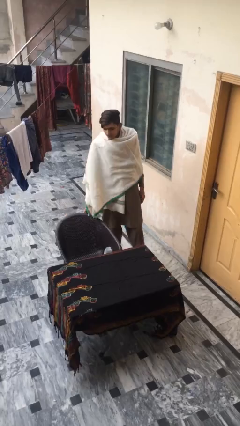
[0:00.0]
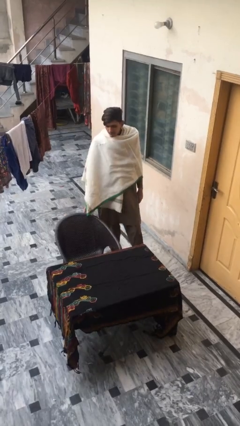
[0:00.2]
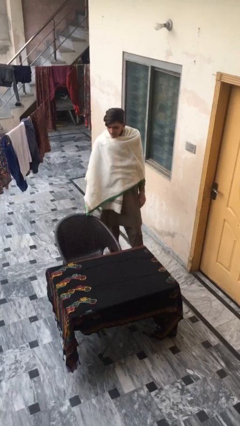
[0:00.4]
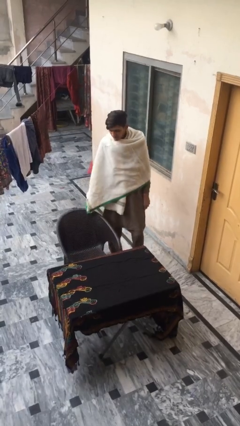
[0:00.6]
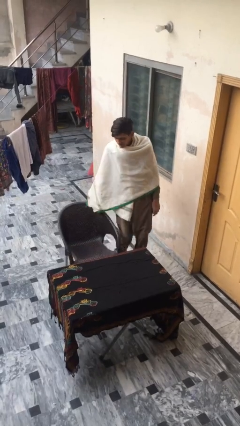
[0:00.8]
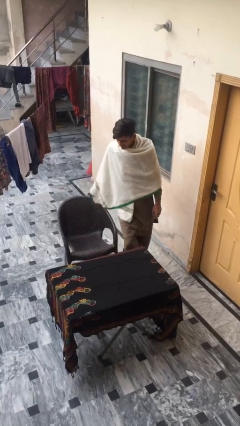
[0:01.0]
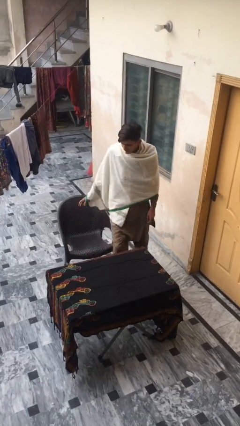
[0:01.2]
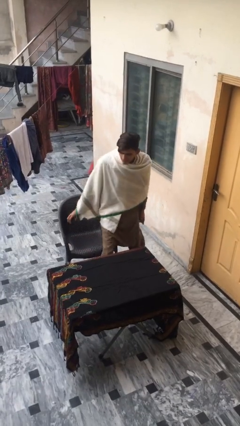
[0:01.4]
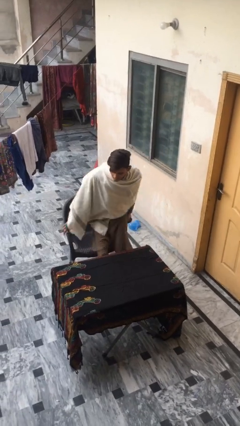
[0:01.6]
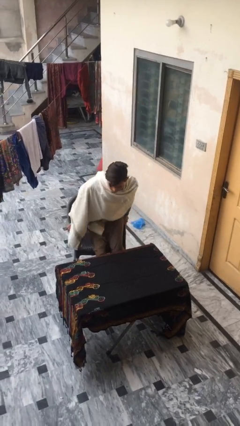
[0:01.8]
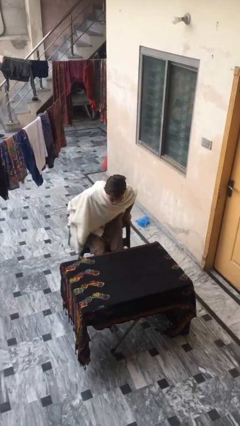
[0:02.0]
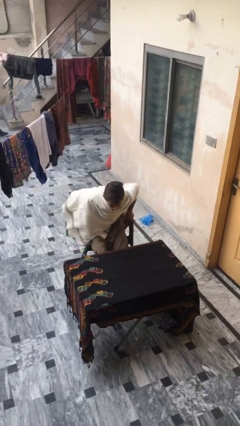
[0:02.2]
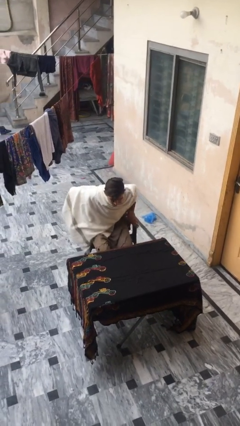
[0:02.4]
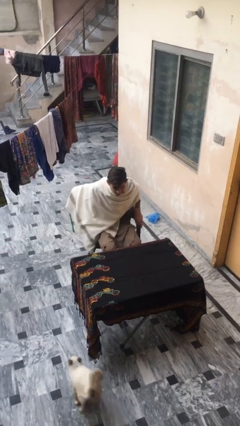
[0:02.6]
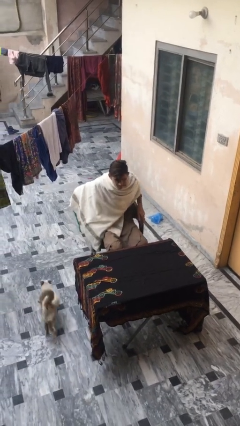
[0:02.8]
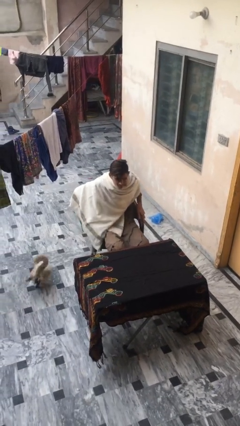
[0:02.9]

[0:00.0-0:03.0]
person sits down

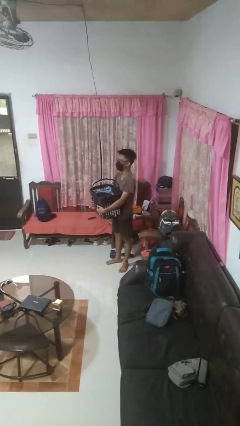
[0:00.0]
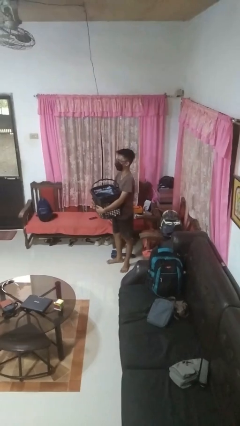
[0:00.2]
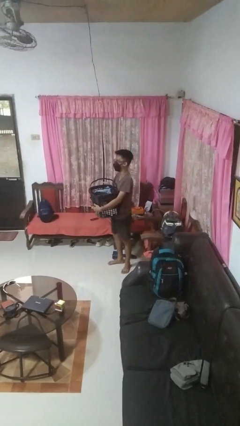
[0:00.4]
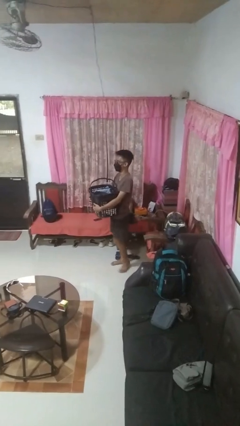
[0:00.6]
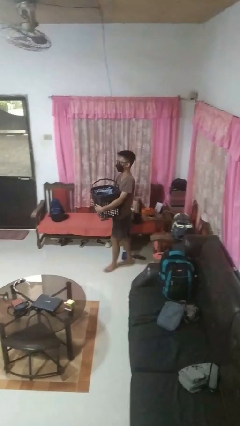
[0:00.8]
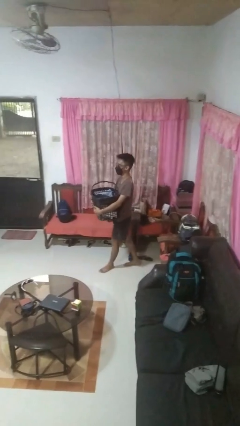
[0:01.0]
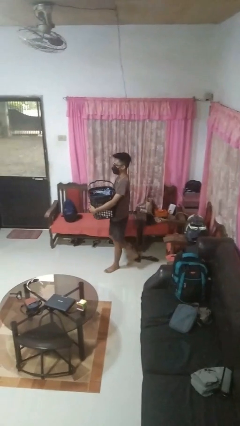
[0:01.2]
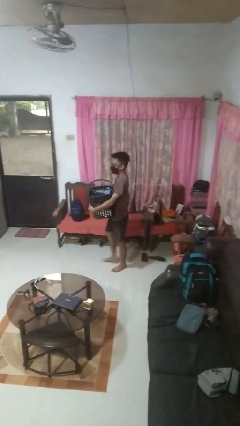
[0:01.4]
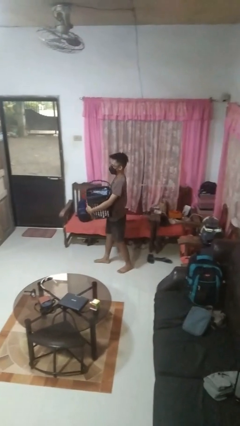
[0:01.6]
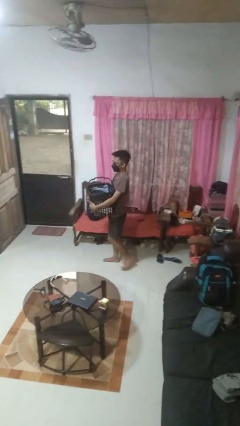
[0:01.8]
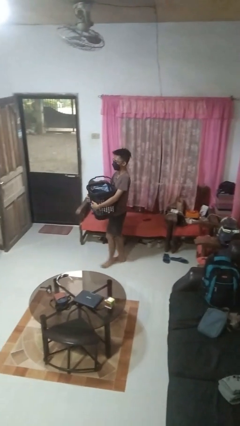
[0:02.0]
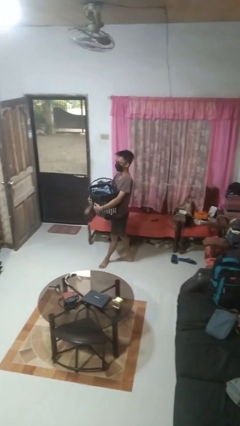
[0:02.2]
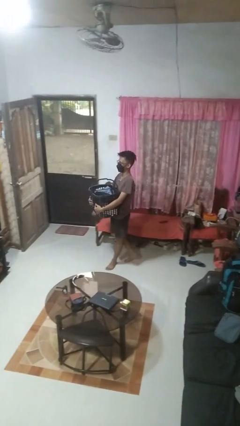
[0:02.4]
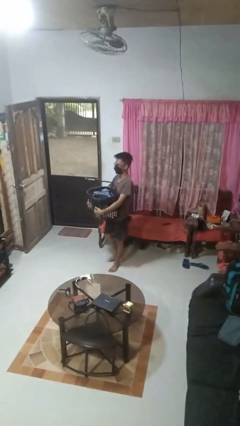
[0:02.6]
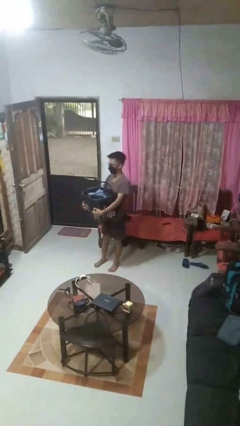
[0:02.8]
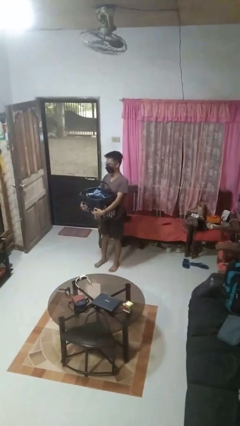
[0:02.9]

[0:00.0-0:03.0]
person carries laundry basket

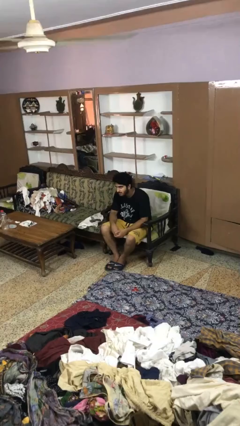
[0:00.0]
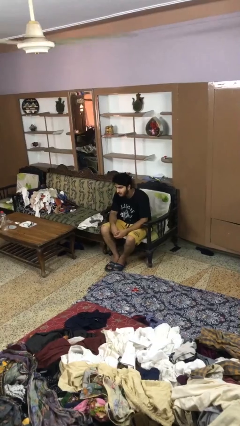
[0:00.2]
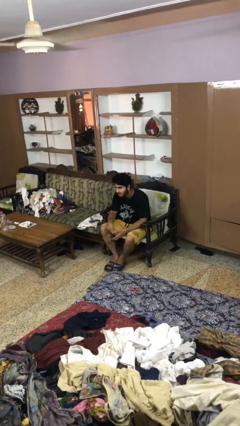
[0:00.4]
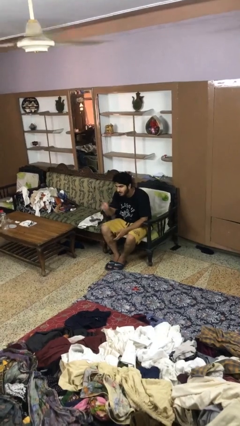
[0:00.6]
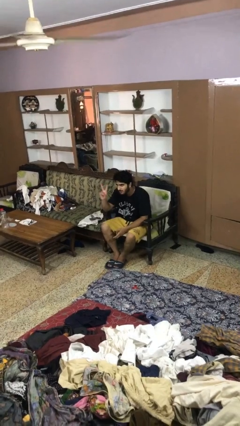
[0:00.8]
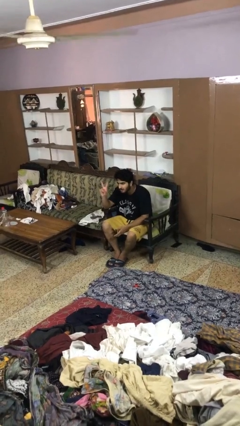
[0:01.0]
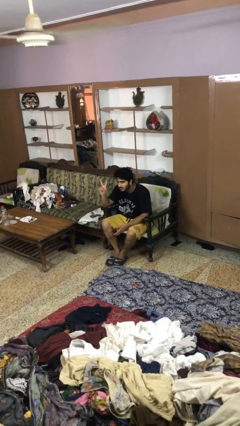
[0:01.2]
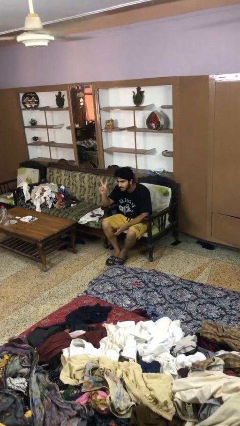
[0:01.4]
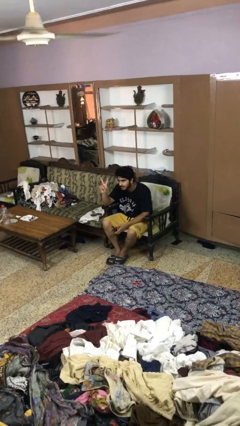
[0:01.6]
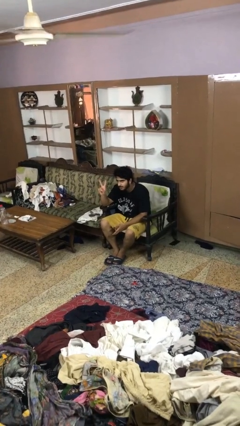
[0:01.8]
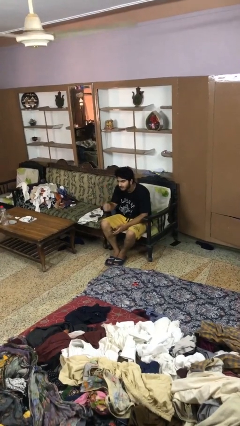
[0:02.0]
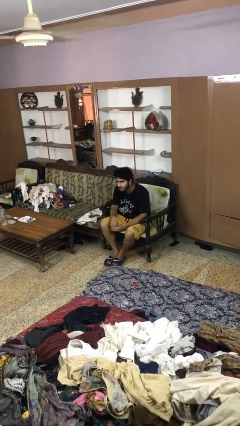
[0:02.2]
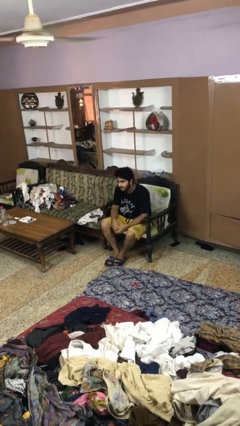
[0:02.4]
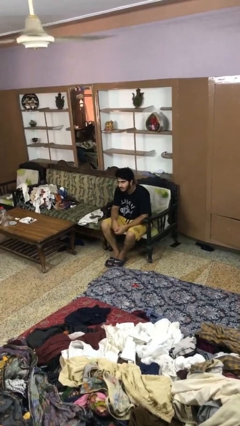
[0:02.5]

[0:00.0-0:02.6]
person gestures peace

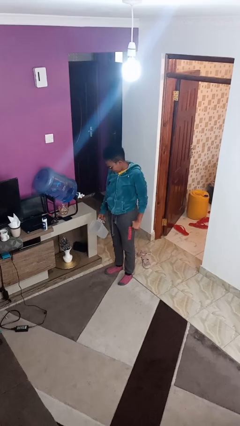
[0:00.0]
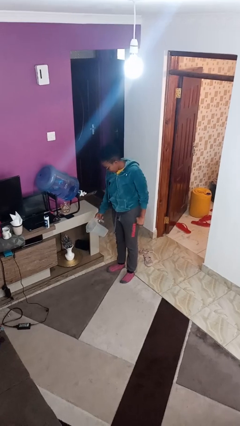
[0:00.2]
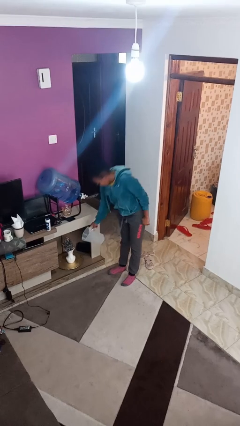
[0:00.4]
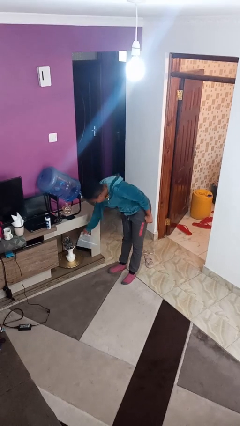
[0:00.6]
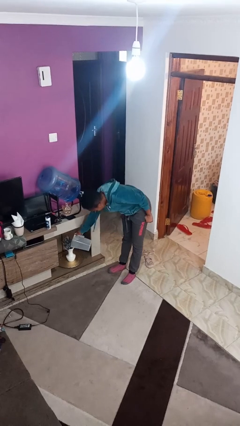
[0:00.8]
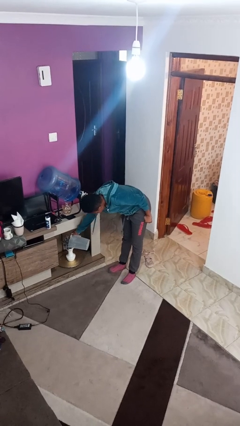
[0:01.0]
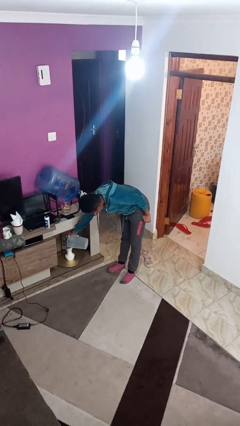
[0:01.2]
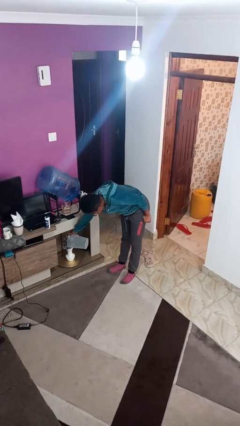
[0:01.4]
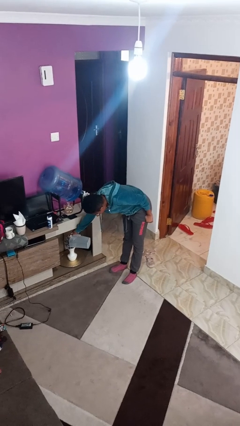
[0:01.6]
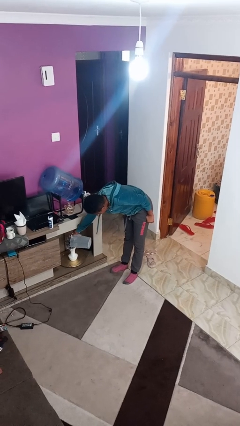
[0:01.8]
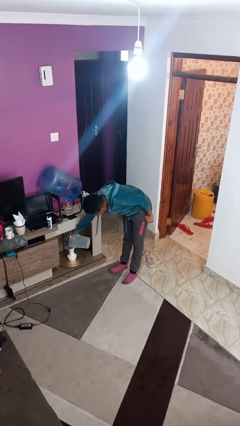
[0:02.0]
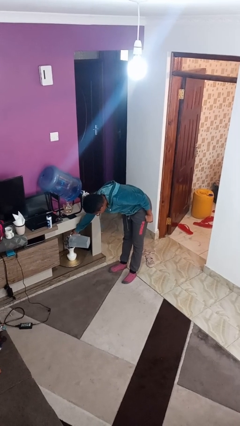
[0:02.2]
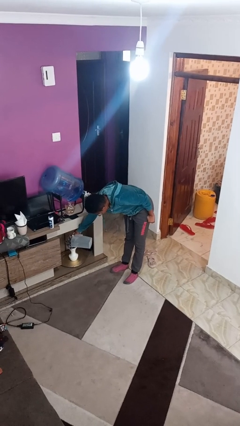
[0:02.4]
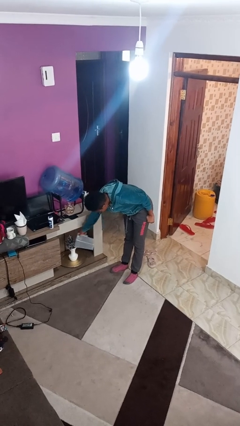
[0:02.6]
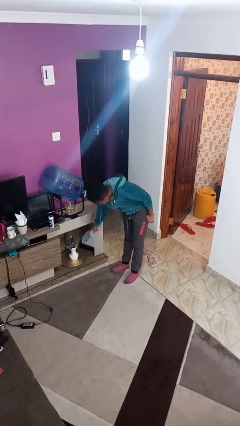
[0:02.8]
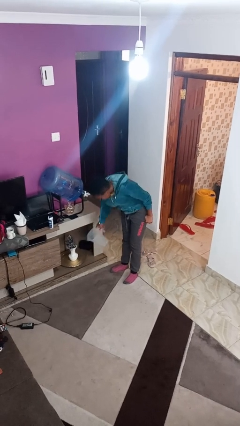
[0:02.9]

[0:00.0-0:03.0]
person waters houseplant

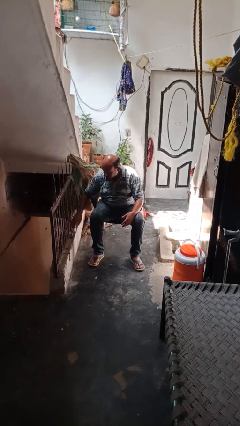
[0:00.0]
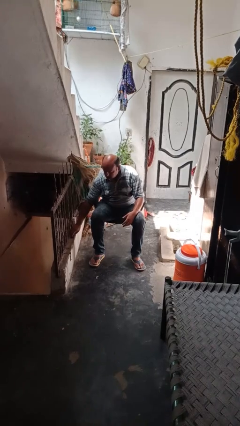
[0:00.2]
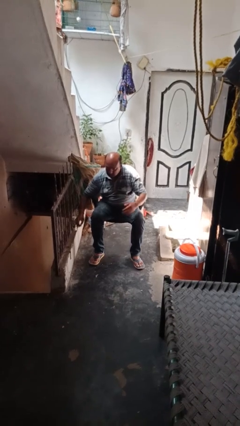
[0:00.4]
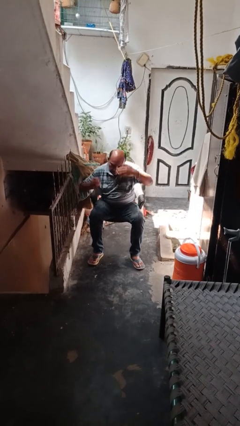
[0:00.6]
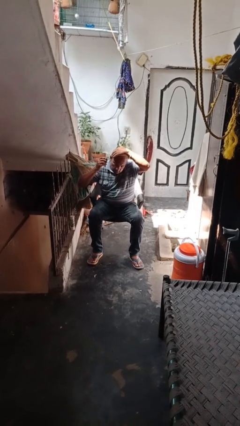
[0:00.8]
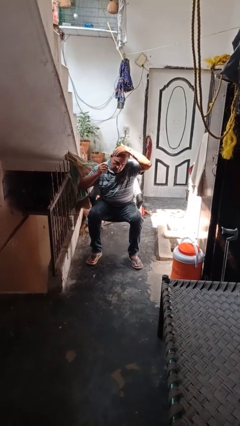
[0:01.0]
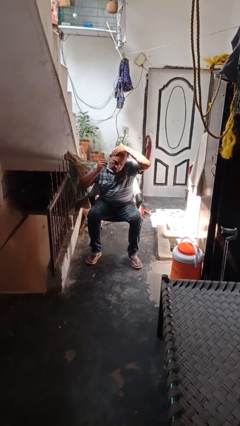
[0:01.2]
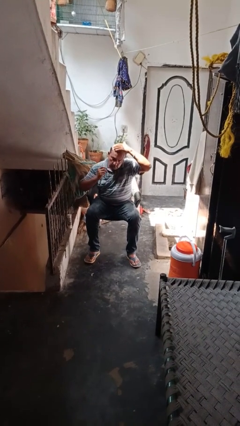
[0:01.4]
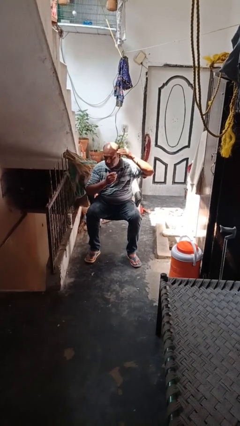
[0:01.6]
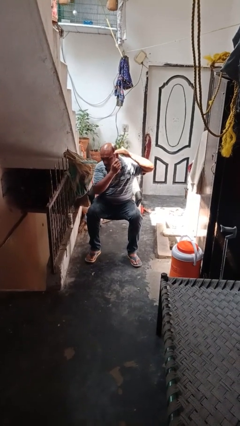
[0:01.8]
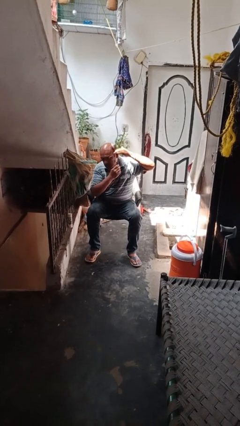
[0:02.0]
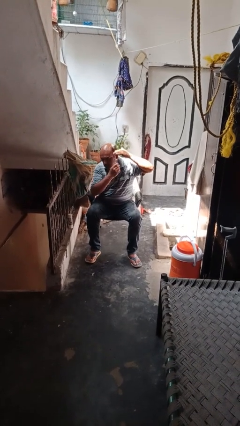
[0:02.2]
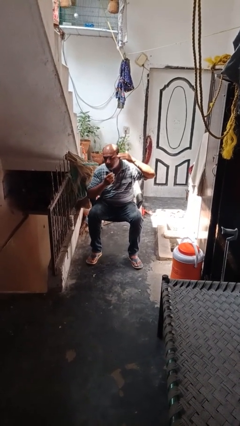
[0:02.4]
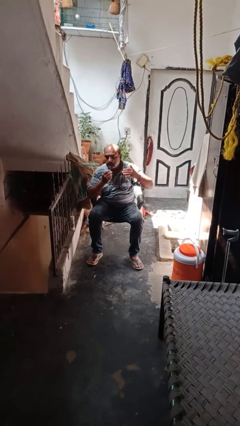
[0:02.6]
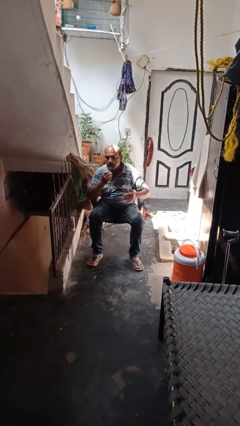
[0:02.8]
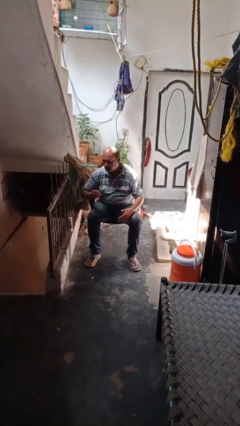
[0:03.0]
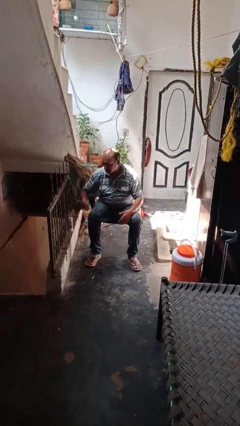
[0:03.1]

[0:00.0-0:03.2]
person shaves face

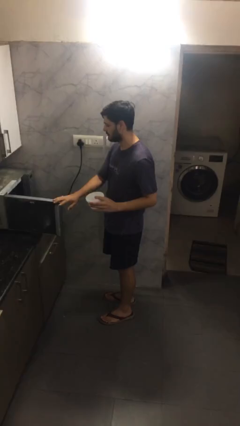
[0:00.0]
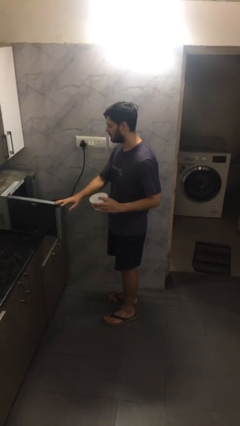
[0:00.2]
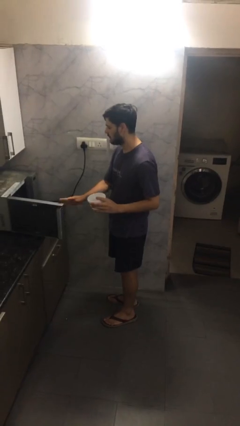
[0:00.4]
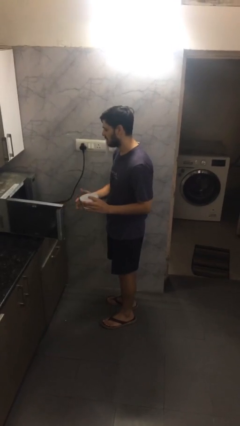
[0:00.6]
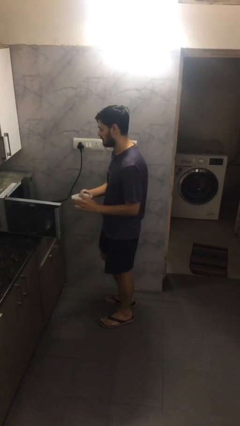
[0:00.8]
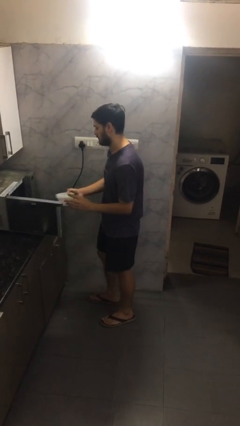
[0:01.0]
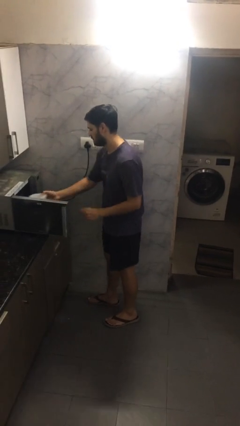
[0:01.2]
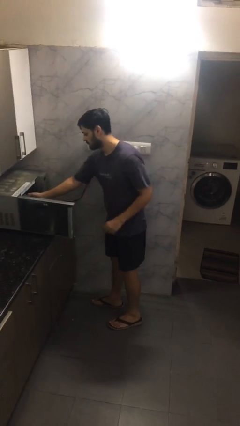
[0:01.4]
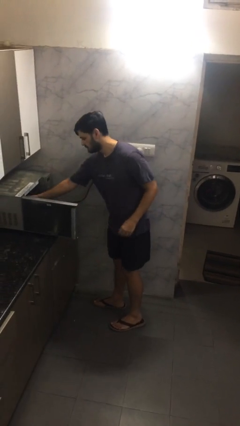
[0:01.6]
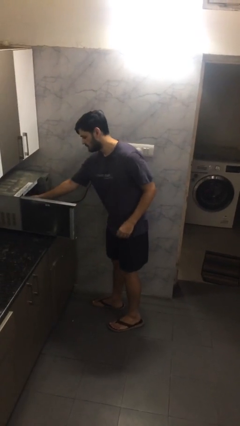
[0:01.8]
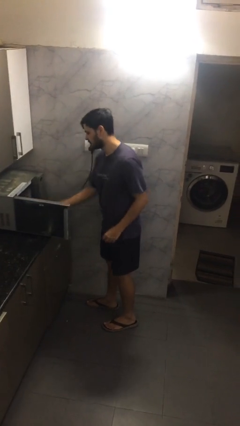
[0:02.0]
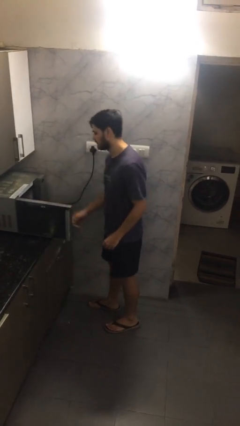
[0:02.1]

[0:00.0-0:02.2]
person puts object into microwave

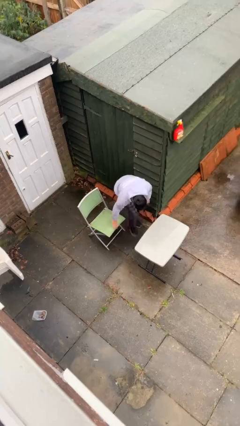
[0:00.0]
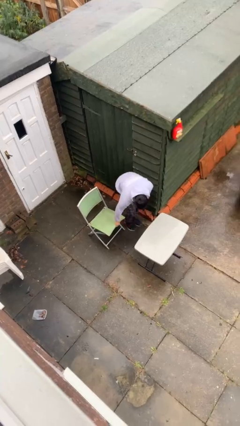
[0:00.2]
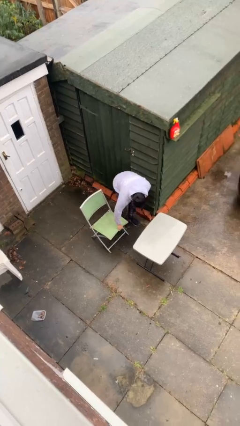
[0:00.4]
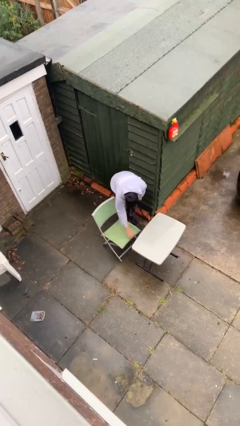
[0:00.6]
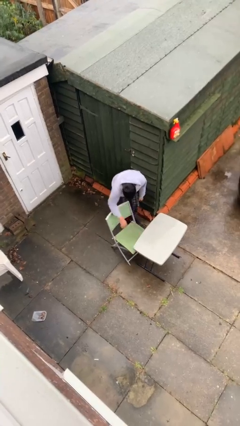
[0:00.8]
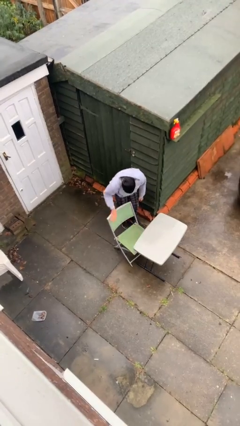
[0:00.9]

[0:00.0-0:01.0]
person stands up
